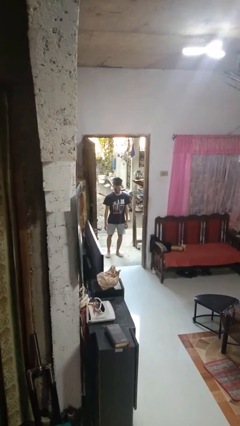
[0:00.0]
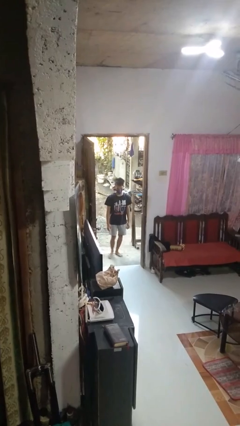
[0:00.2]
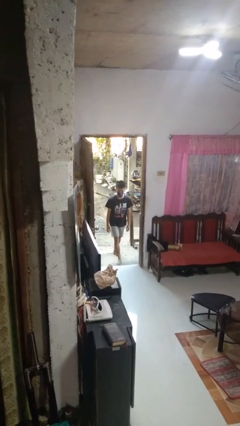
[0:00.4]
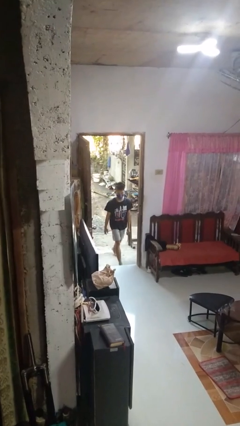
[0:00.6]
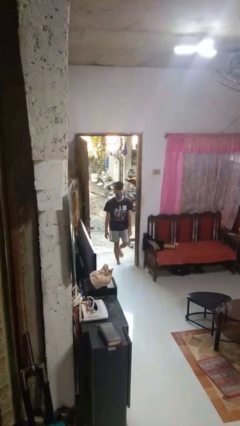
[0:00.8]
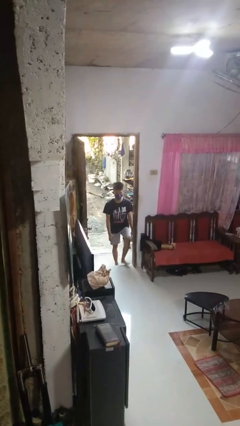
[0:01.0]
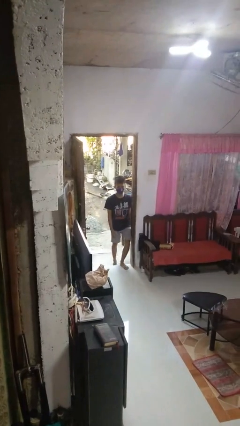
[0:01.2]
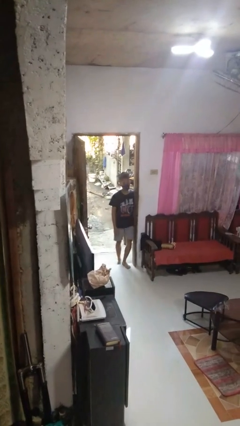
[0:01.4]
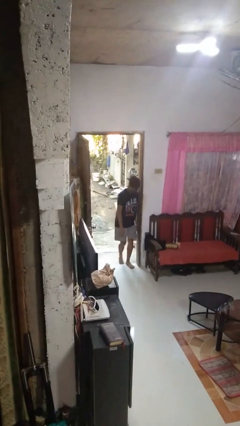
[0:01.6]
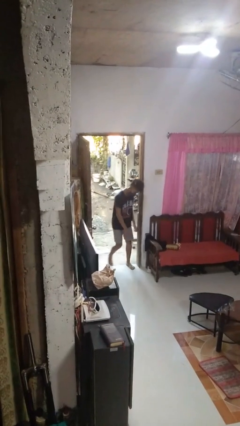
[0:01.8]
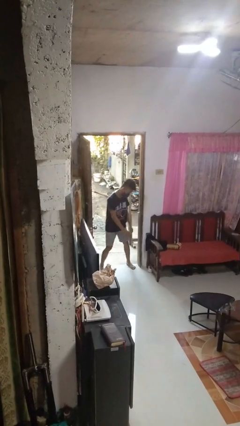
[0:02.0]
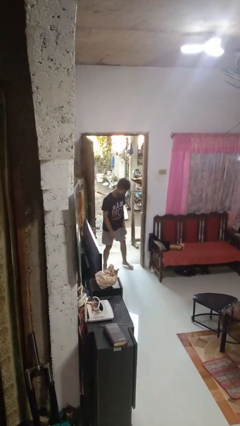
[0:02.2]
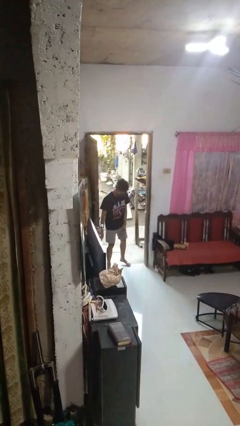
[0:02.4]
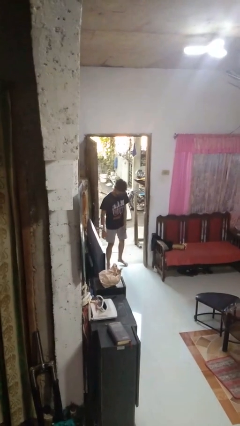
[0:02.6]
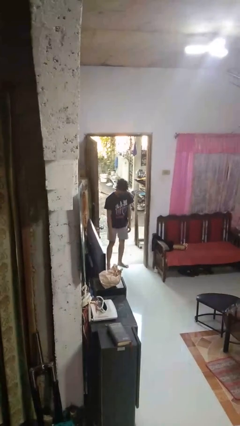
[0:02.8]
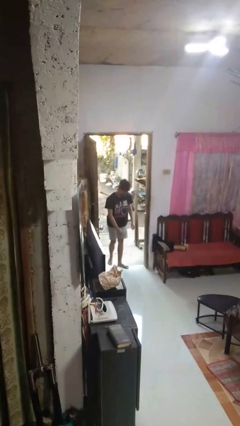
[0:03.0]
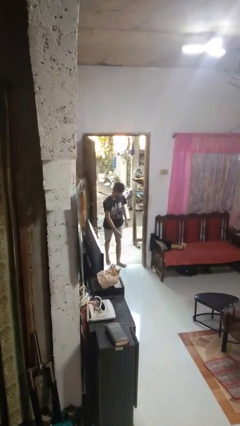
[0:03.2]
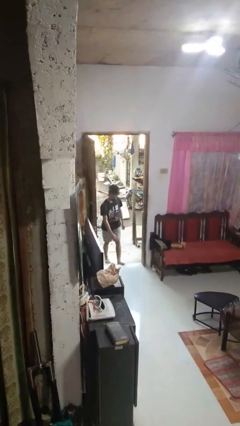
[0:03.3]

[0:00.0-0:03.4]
person bumps into wall

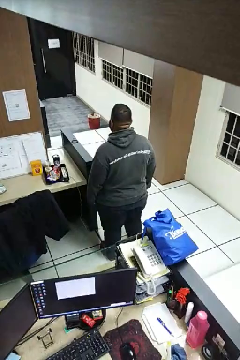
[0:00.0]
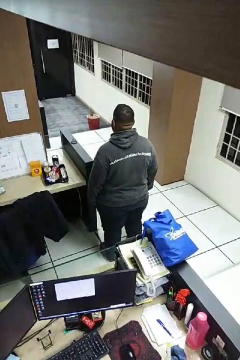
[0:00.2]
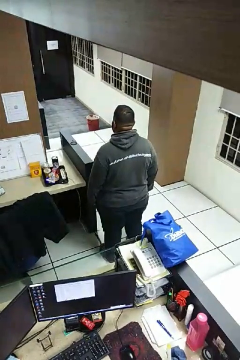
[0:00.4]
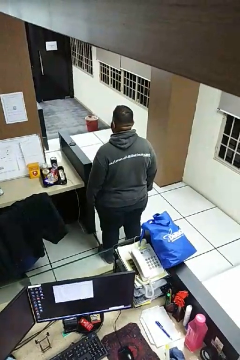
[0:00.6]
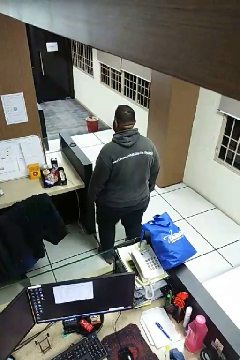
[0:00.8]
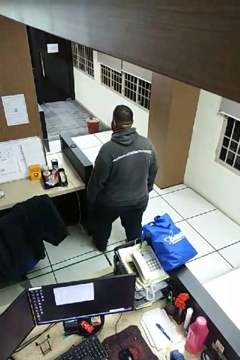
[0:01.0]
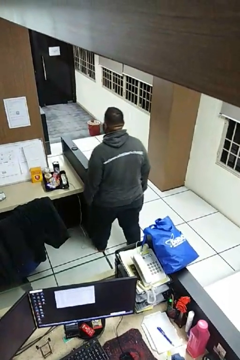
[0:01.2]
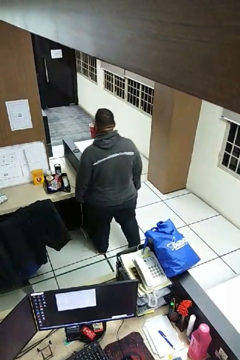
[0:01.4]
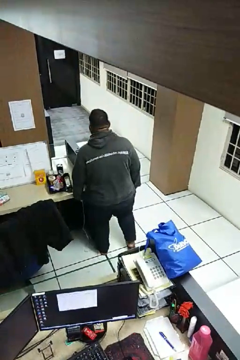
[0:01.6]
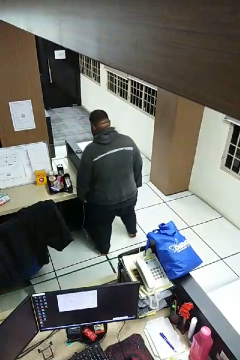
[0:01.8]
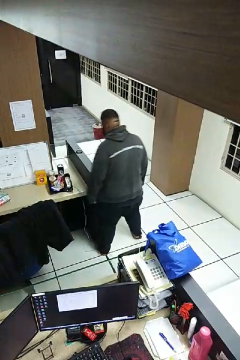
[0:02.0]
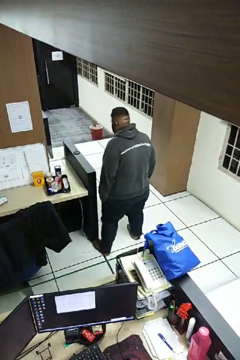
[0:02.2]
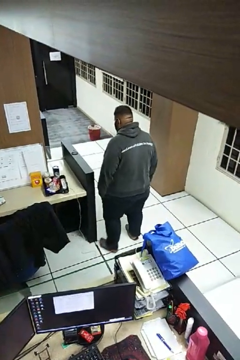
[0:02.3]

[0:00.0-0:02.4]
person bumps into table

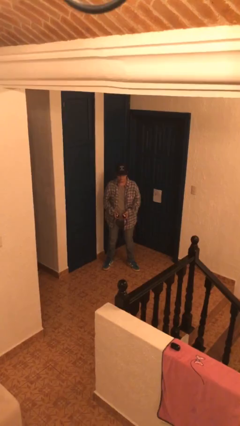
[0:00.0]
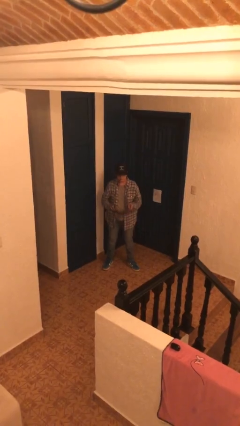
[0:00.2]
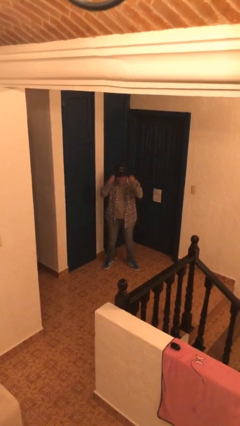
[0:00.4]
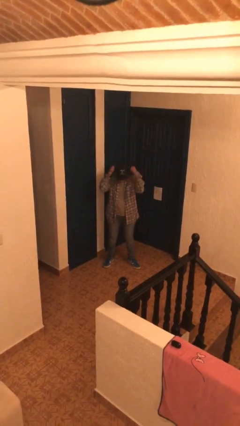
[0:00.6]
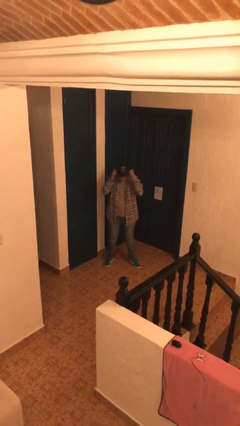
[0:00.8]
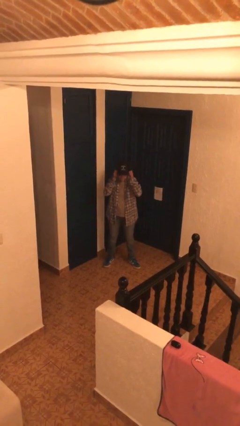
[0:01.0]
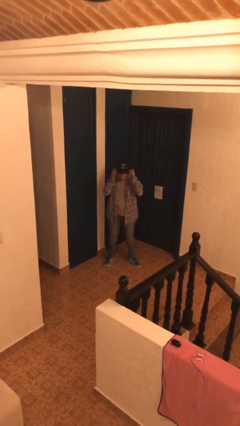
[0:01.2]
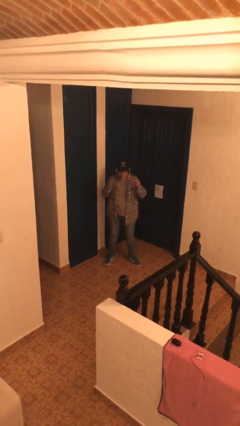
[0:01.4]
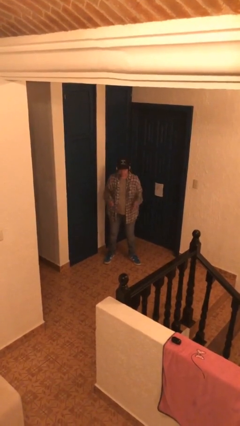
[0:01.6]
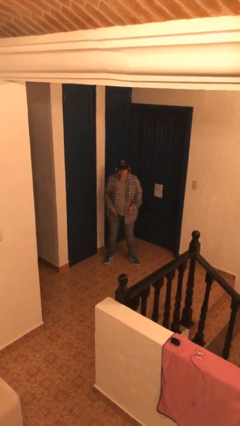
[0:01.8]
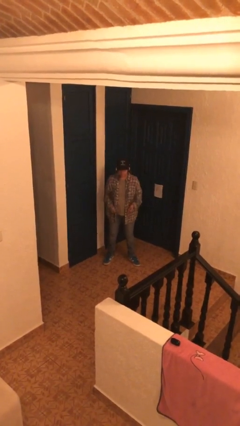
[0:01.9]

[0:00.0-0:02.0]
person puts on headphones

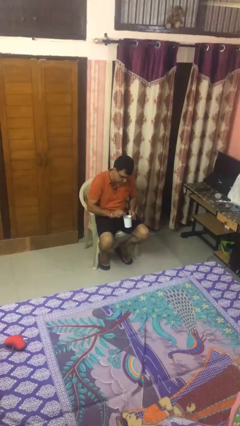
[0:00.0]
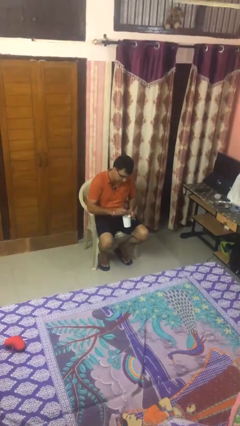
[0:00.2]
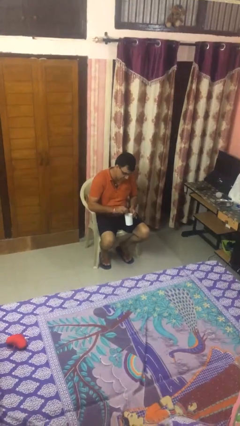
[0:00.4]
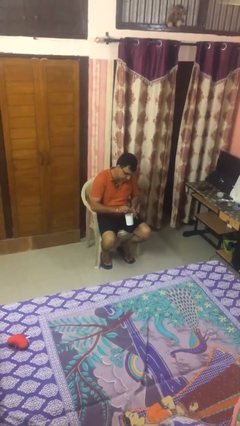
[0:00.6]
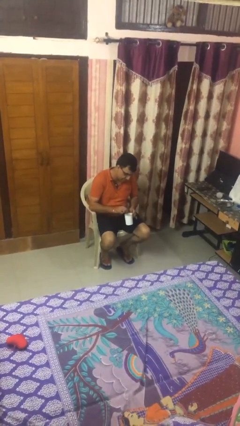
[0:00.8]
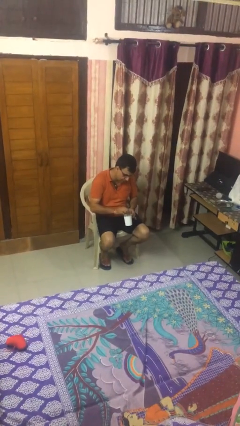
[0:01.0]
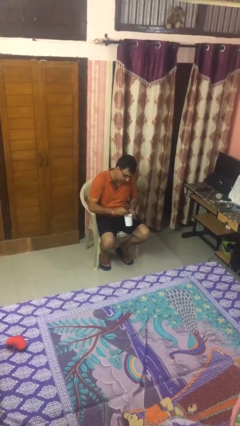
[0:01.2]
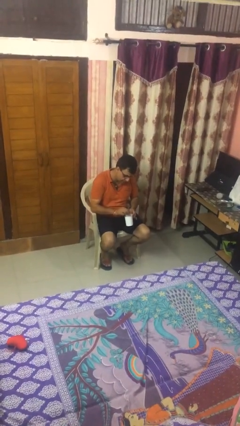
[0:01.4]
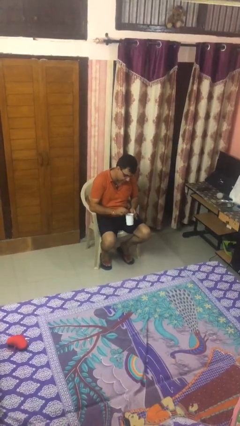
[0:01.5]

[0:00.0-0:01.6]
person stirs mug

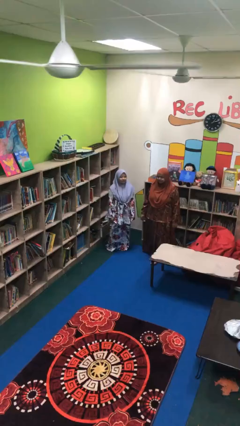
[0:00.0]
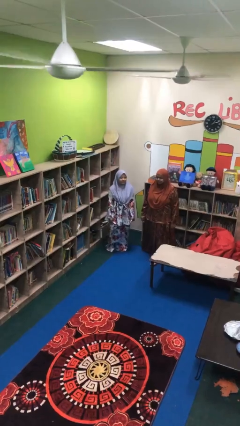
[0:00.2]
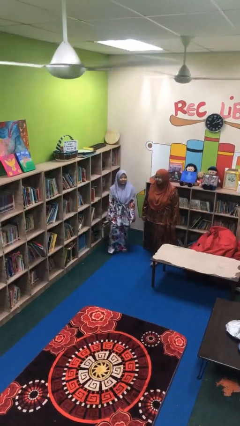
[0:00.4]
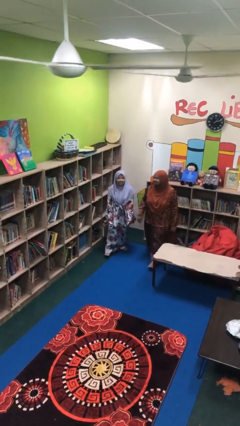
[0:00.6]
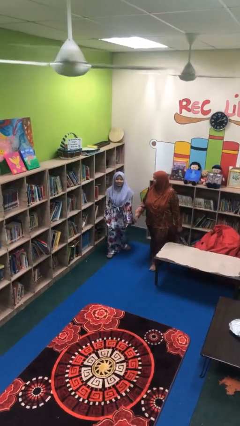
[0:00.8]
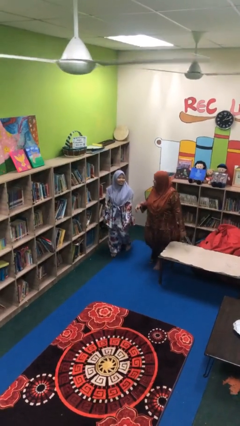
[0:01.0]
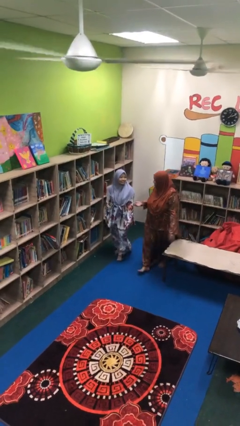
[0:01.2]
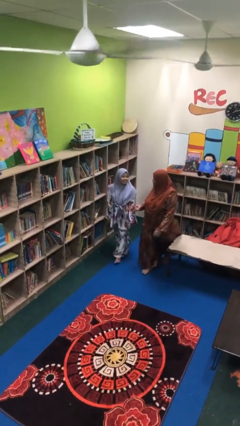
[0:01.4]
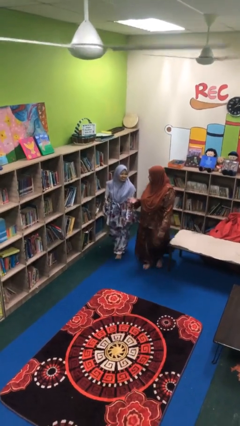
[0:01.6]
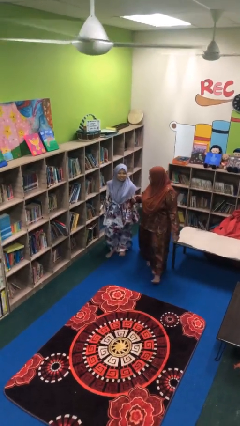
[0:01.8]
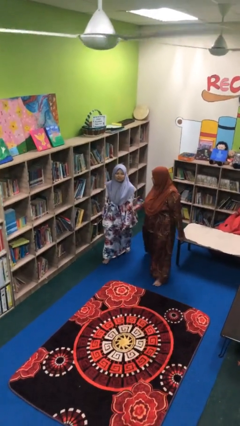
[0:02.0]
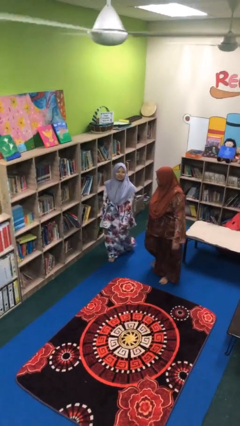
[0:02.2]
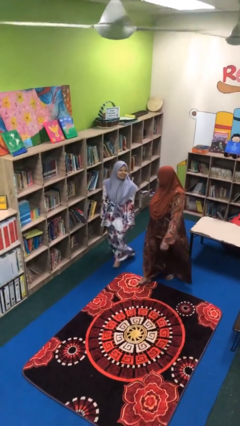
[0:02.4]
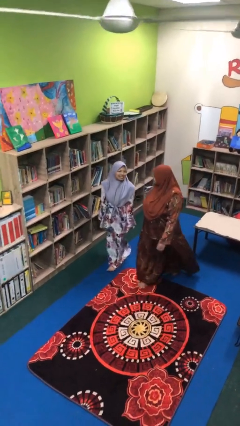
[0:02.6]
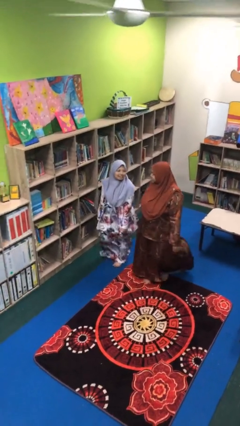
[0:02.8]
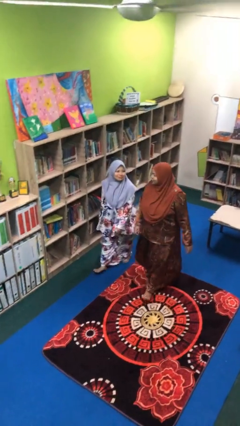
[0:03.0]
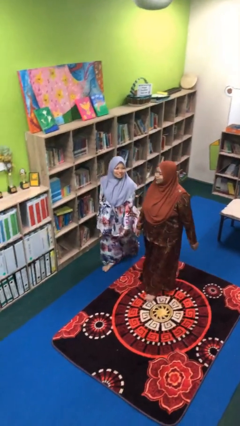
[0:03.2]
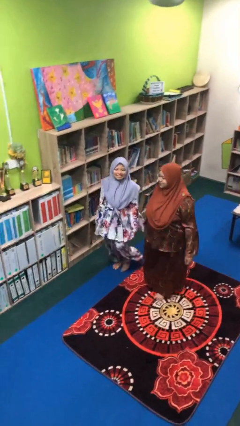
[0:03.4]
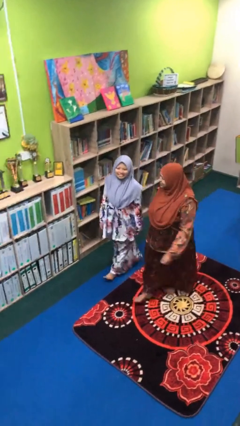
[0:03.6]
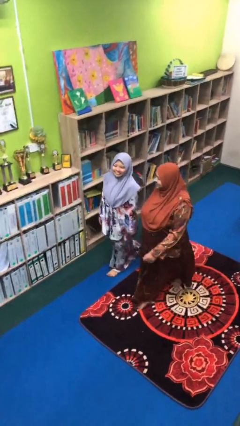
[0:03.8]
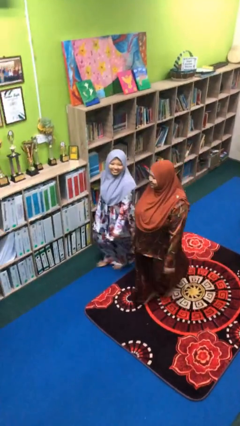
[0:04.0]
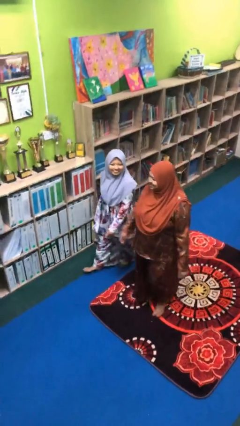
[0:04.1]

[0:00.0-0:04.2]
person talks to person

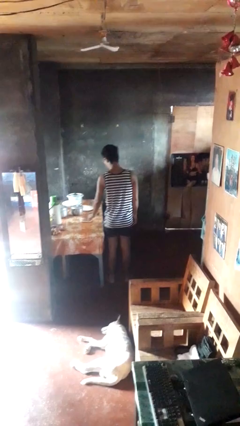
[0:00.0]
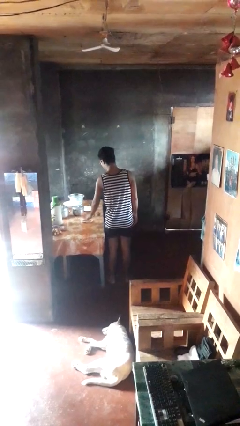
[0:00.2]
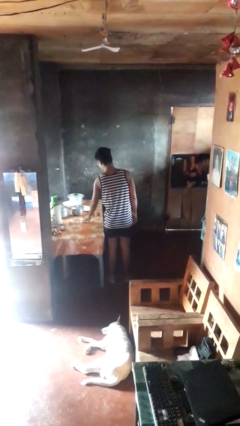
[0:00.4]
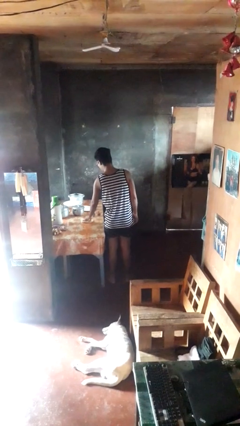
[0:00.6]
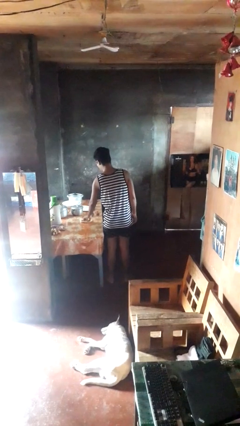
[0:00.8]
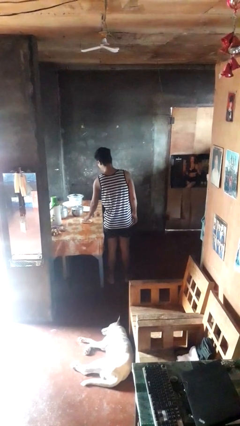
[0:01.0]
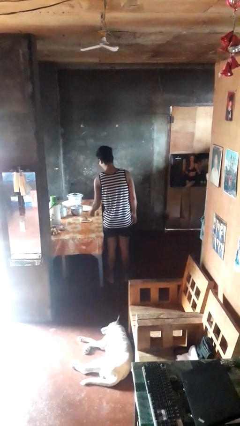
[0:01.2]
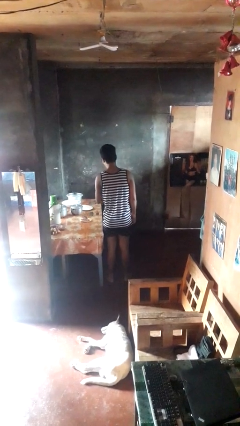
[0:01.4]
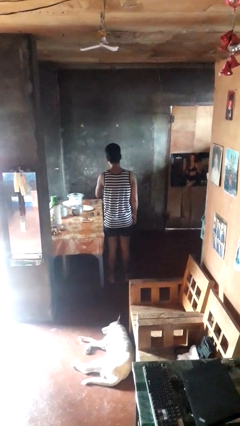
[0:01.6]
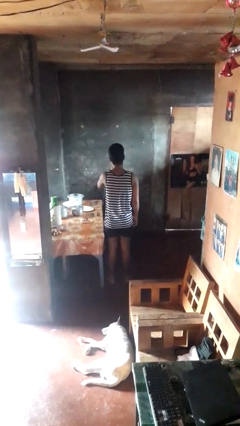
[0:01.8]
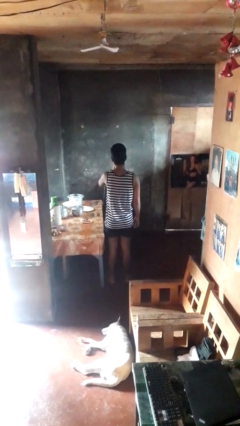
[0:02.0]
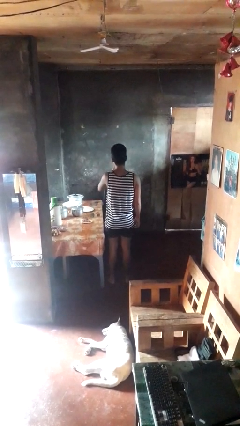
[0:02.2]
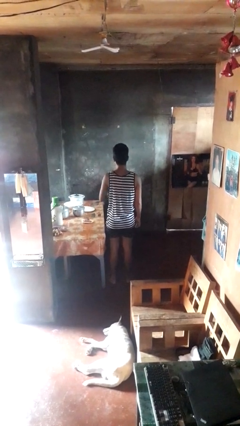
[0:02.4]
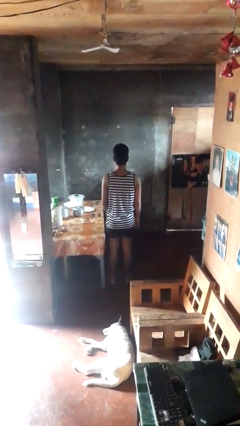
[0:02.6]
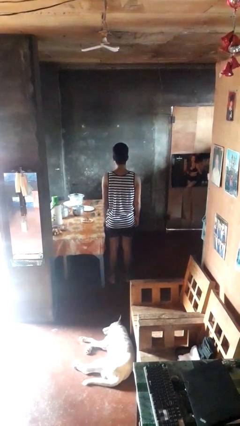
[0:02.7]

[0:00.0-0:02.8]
person eats with hands

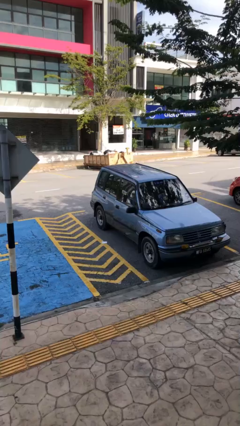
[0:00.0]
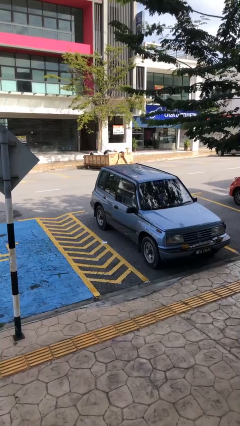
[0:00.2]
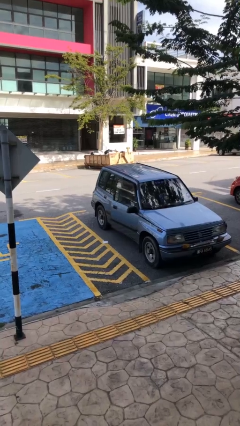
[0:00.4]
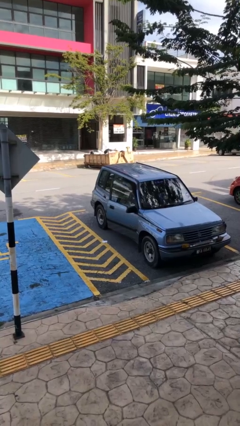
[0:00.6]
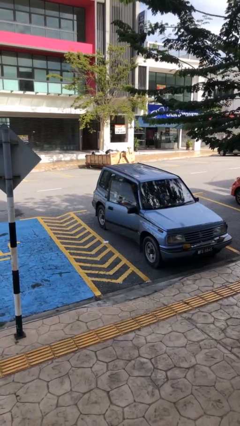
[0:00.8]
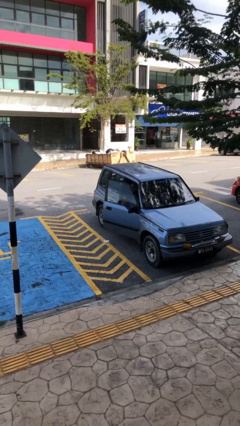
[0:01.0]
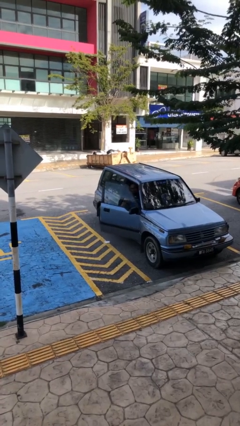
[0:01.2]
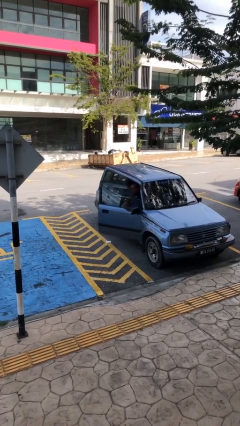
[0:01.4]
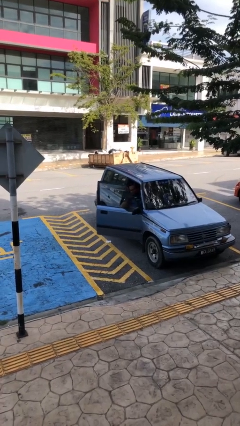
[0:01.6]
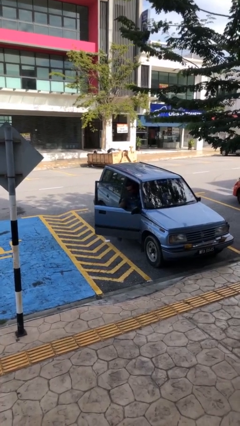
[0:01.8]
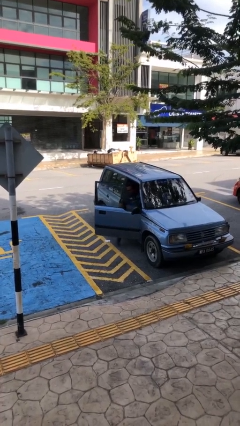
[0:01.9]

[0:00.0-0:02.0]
person opens car door
